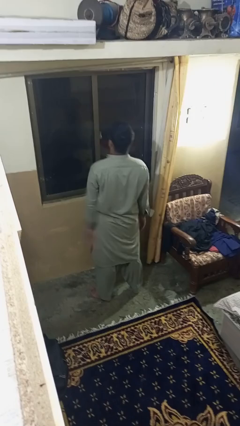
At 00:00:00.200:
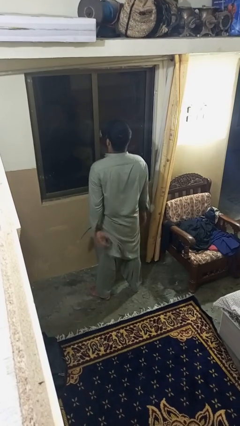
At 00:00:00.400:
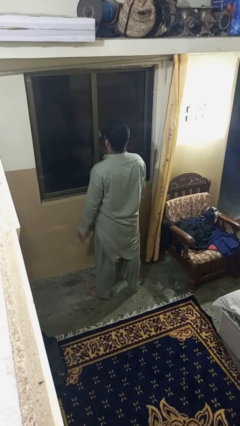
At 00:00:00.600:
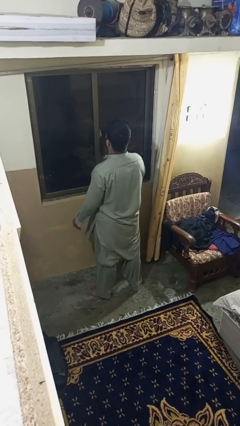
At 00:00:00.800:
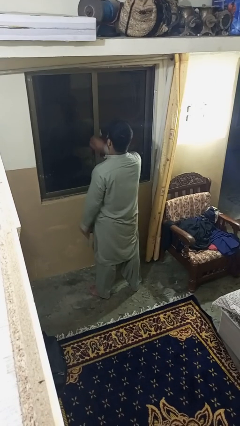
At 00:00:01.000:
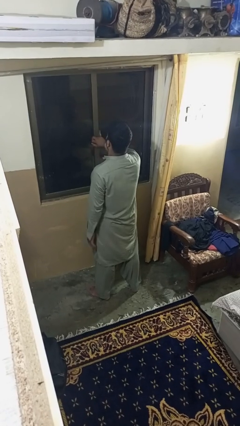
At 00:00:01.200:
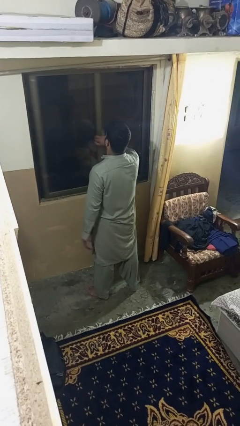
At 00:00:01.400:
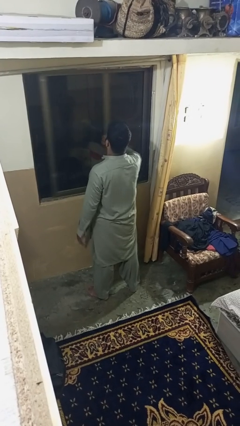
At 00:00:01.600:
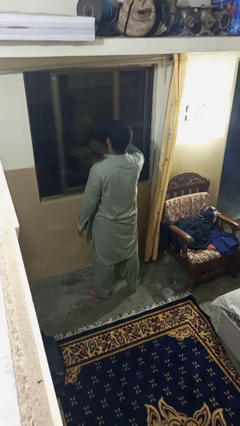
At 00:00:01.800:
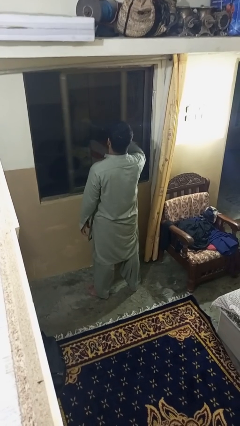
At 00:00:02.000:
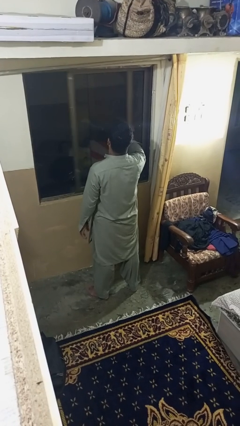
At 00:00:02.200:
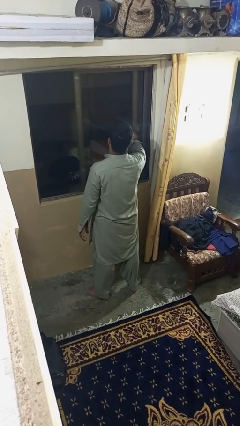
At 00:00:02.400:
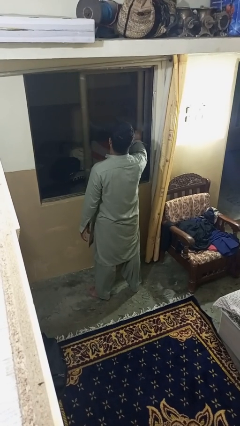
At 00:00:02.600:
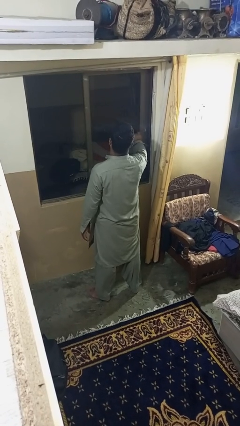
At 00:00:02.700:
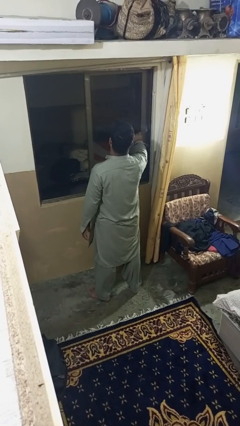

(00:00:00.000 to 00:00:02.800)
person opens home window

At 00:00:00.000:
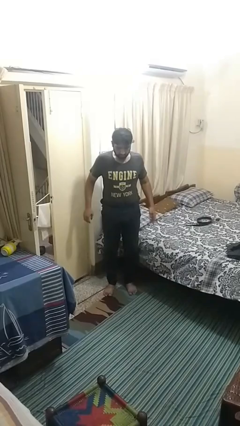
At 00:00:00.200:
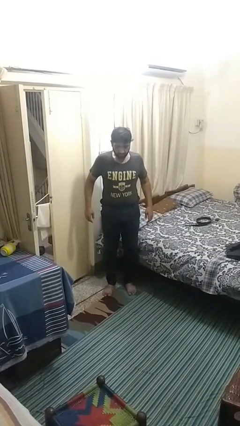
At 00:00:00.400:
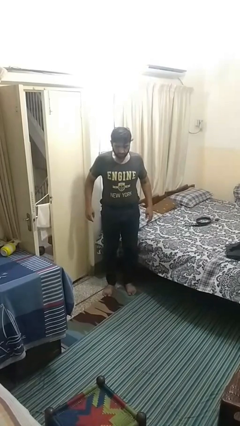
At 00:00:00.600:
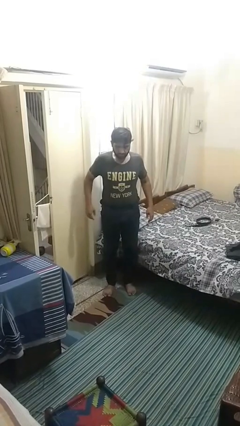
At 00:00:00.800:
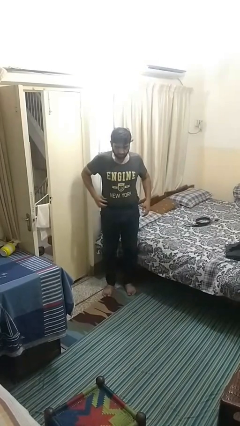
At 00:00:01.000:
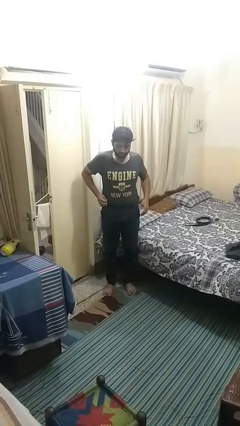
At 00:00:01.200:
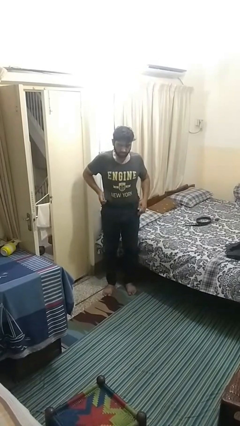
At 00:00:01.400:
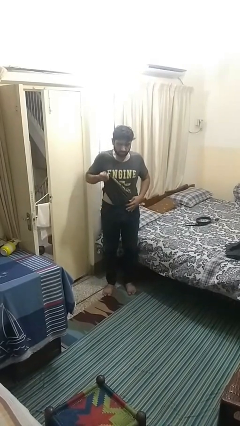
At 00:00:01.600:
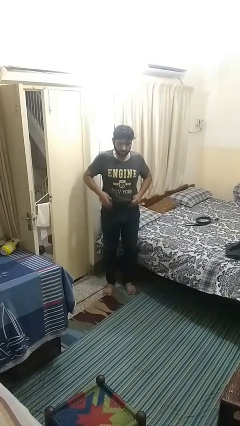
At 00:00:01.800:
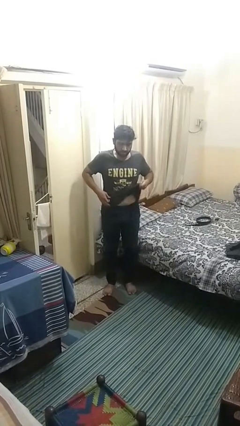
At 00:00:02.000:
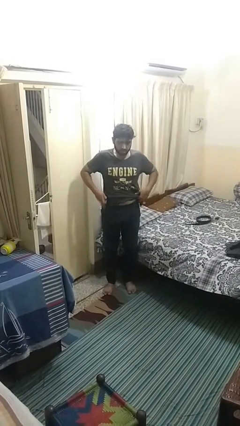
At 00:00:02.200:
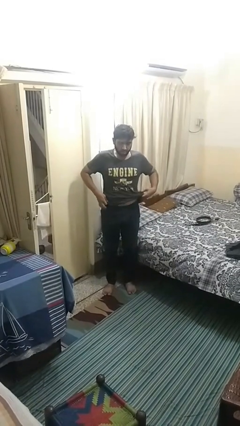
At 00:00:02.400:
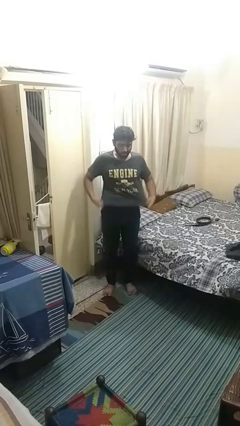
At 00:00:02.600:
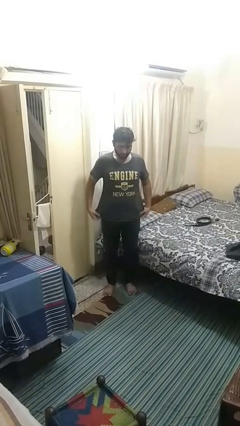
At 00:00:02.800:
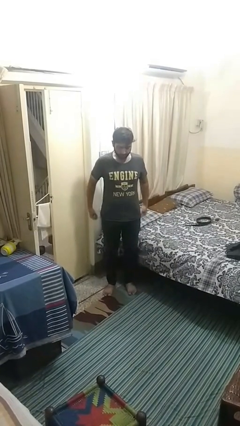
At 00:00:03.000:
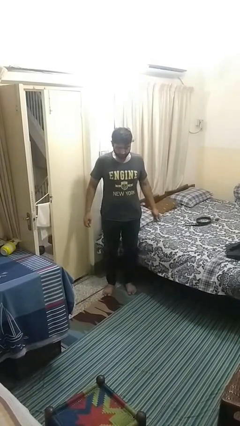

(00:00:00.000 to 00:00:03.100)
person untucks shirt

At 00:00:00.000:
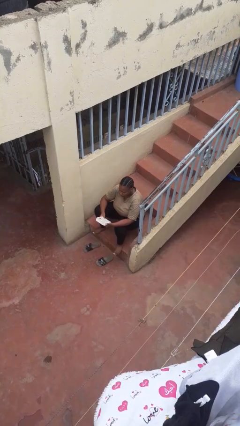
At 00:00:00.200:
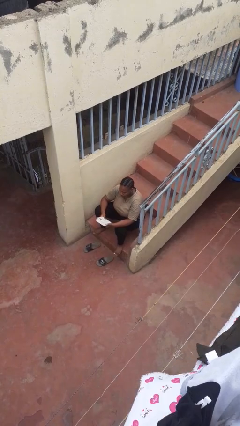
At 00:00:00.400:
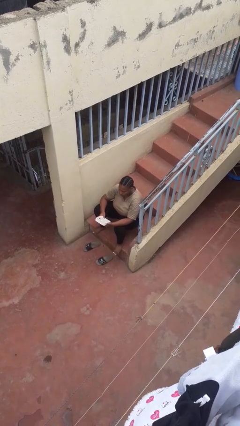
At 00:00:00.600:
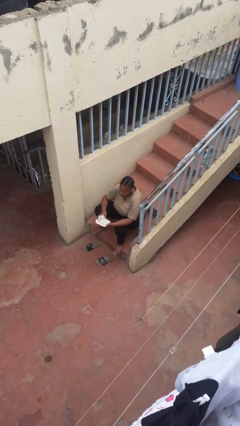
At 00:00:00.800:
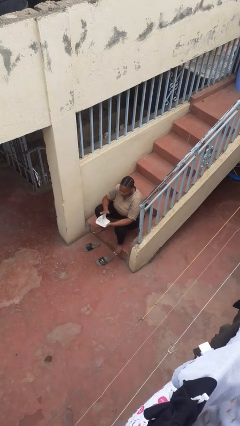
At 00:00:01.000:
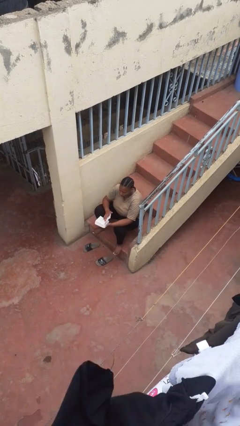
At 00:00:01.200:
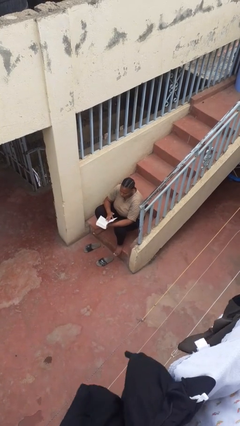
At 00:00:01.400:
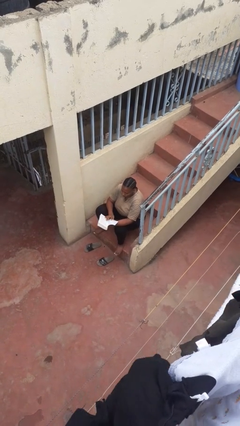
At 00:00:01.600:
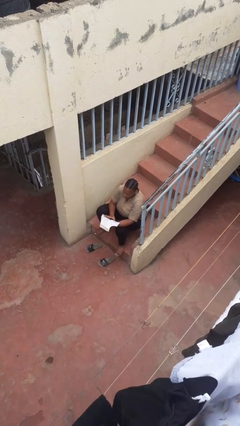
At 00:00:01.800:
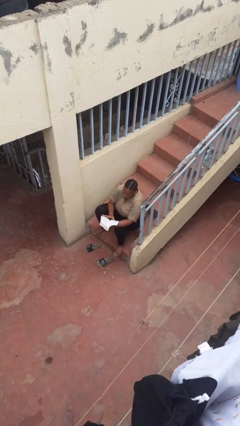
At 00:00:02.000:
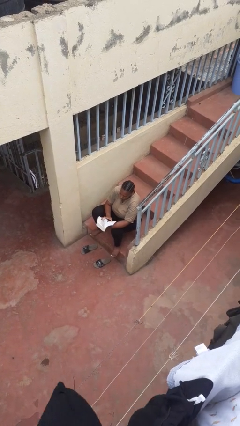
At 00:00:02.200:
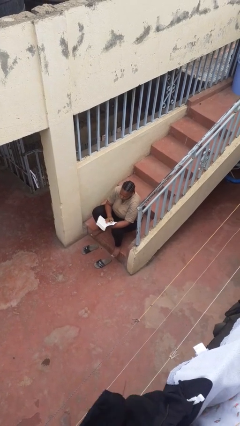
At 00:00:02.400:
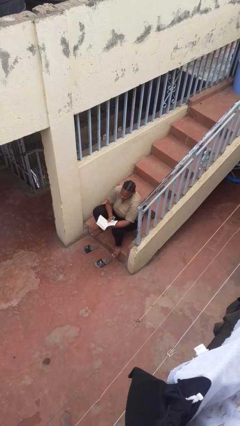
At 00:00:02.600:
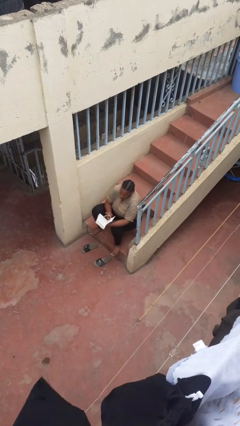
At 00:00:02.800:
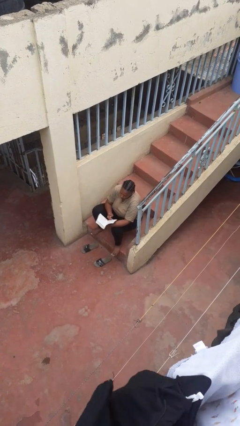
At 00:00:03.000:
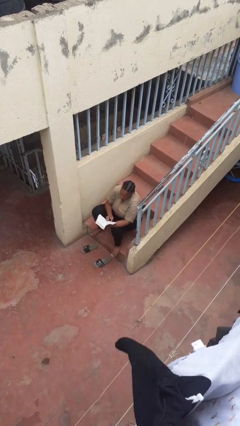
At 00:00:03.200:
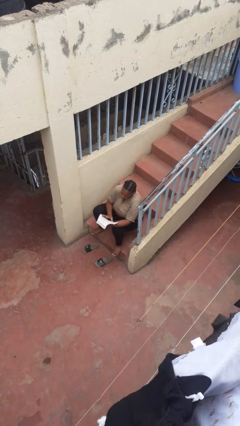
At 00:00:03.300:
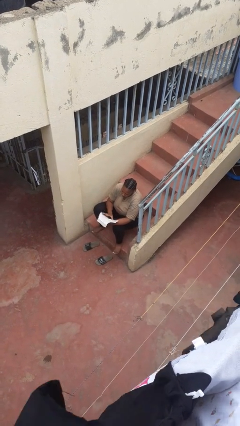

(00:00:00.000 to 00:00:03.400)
person reads book

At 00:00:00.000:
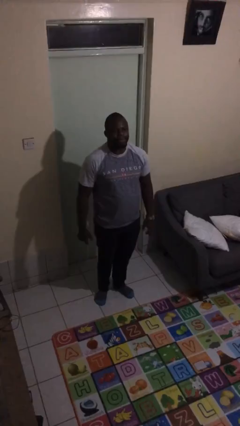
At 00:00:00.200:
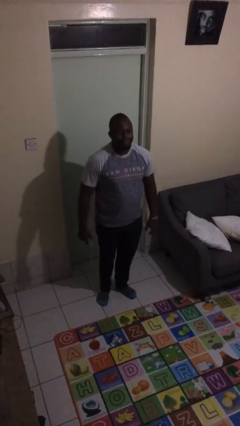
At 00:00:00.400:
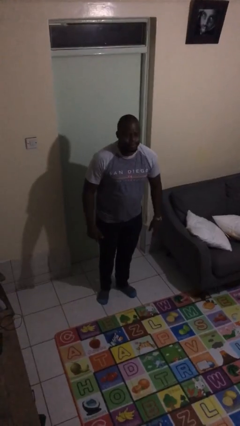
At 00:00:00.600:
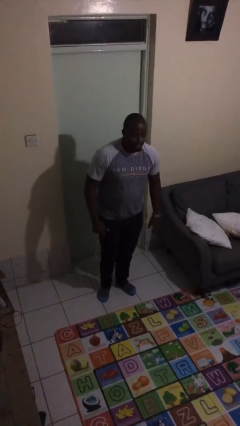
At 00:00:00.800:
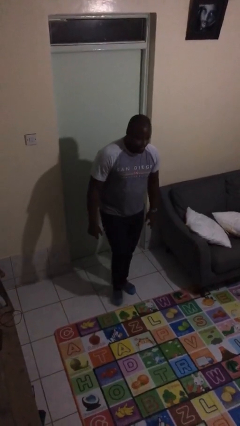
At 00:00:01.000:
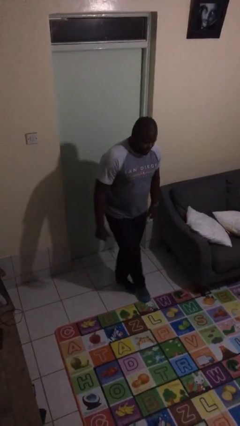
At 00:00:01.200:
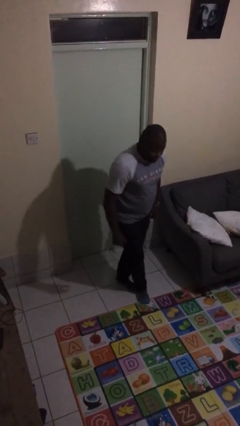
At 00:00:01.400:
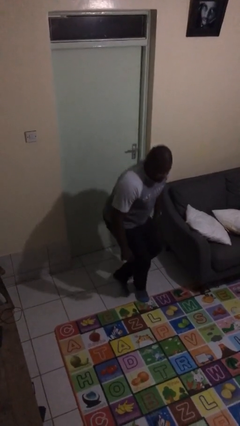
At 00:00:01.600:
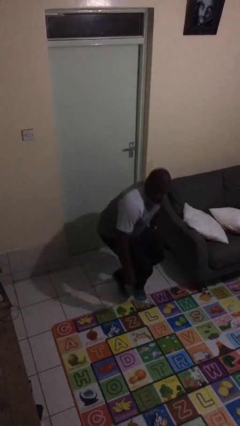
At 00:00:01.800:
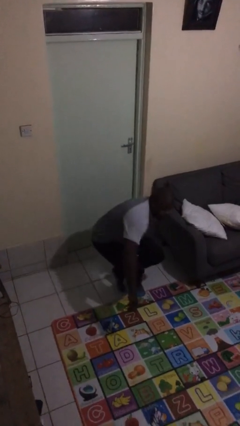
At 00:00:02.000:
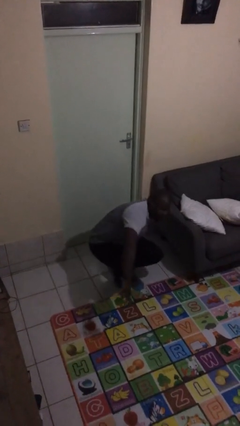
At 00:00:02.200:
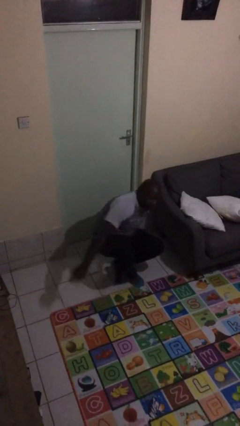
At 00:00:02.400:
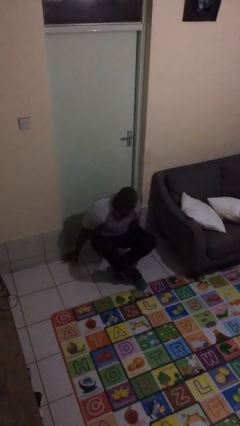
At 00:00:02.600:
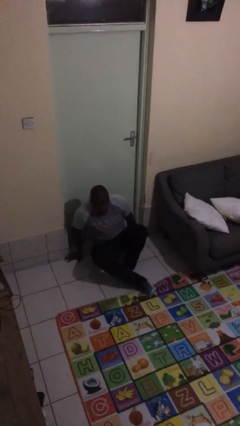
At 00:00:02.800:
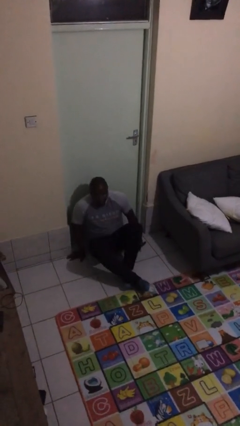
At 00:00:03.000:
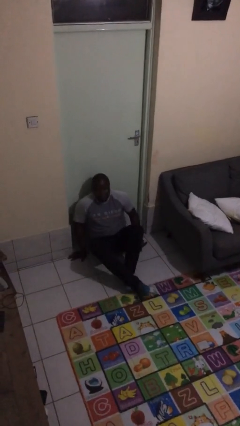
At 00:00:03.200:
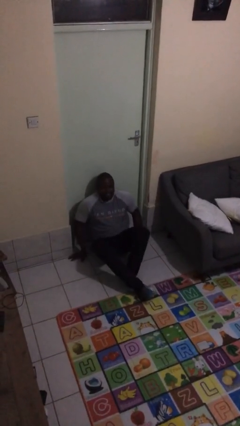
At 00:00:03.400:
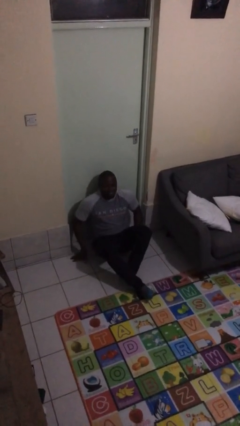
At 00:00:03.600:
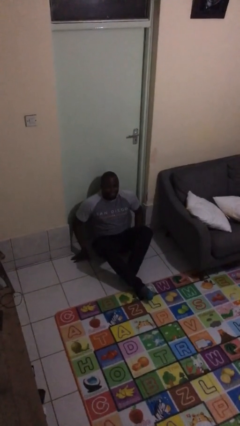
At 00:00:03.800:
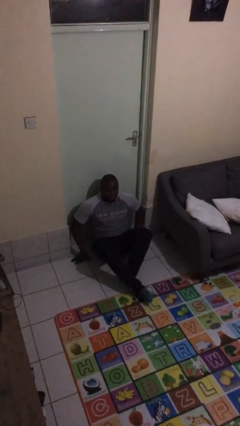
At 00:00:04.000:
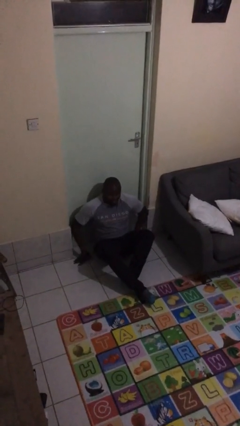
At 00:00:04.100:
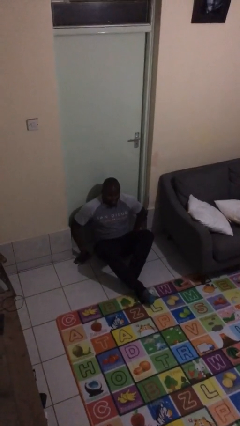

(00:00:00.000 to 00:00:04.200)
person sits crisscross

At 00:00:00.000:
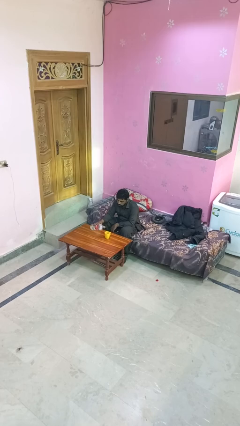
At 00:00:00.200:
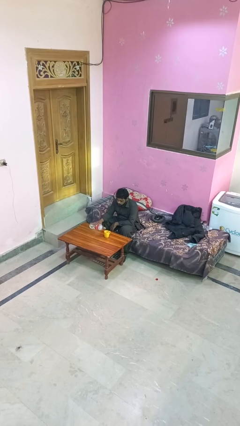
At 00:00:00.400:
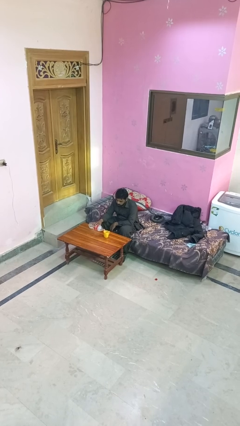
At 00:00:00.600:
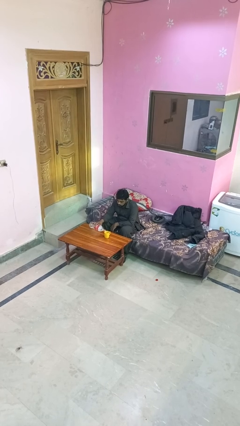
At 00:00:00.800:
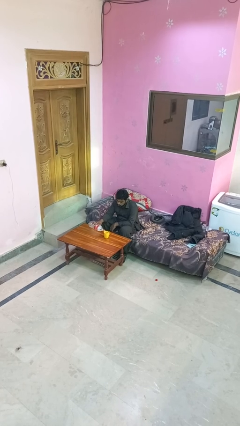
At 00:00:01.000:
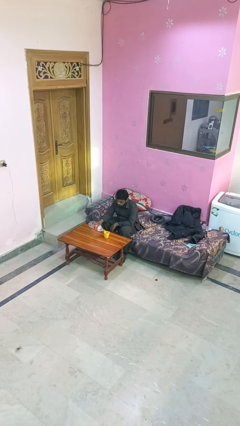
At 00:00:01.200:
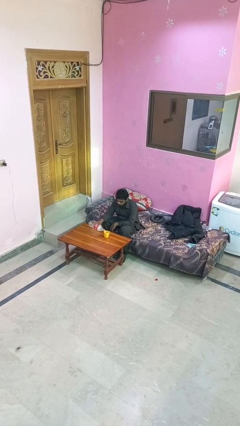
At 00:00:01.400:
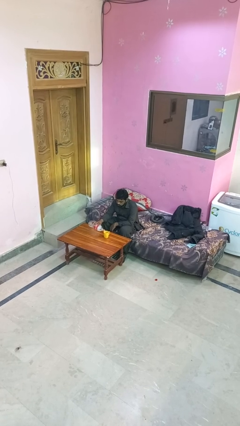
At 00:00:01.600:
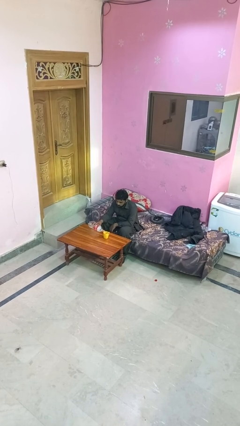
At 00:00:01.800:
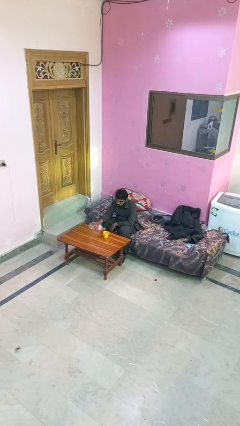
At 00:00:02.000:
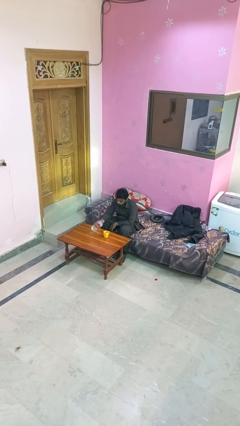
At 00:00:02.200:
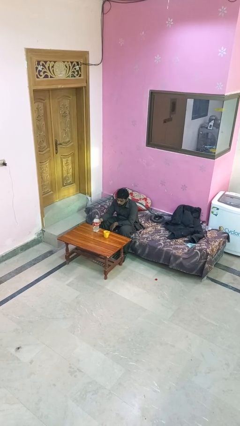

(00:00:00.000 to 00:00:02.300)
person pours liquid into cup

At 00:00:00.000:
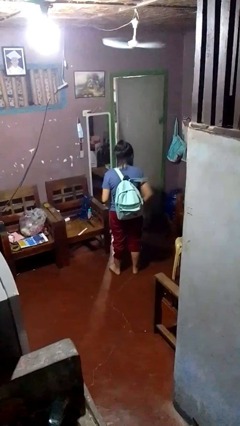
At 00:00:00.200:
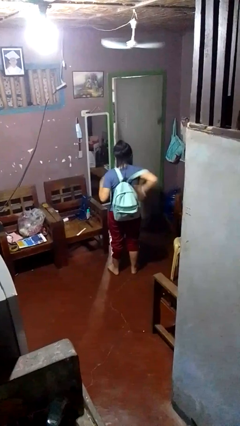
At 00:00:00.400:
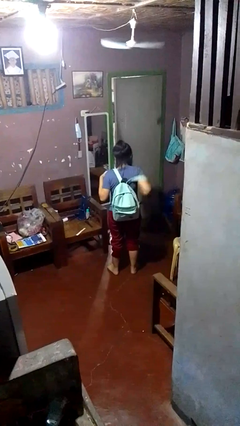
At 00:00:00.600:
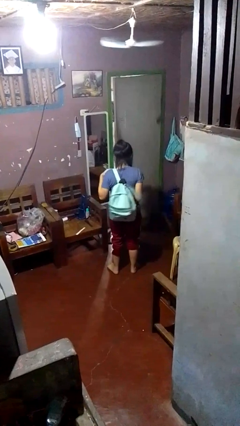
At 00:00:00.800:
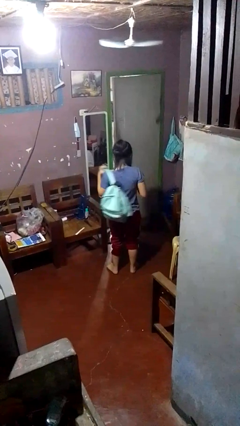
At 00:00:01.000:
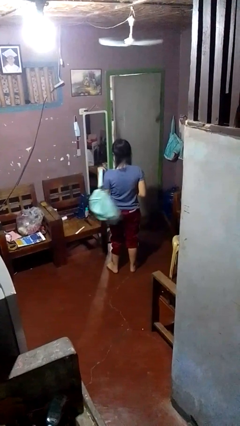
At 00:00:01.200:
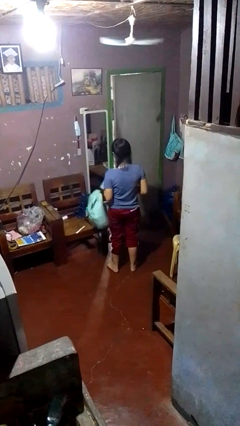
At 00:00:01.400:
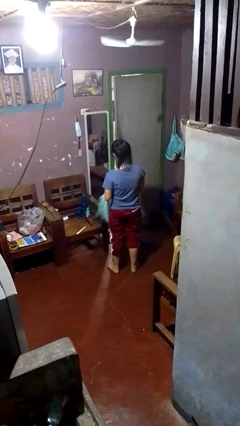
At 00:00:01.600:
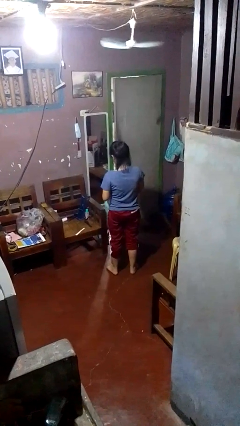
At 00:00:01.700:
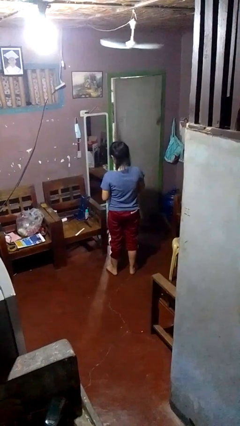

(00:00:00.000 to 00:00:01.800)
person takes off backpack
